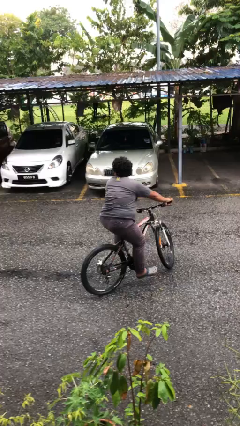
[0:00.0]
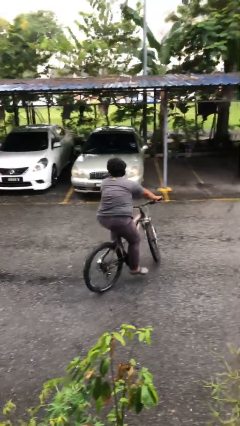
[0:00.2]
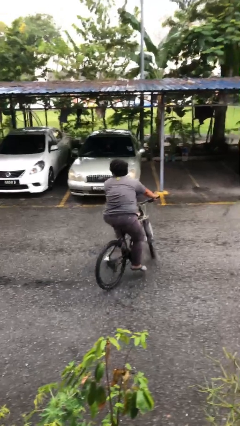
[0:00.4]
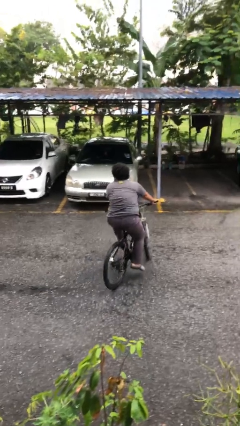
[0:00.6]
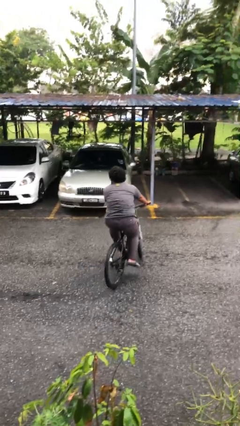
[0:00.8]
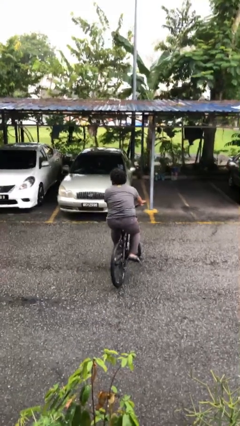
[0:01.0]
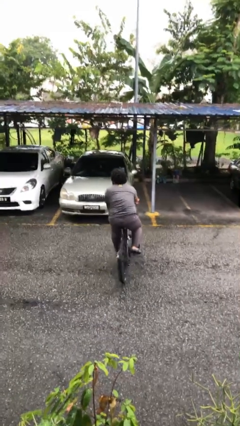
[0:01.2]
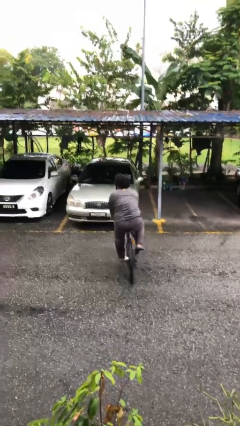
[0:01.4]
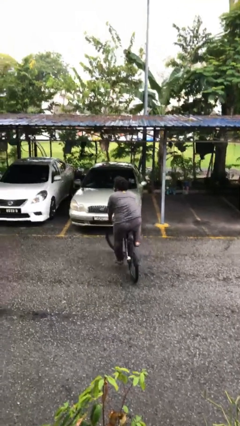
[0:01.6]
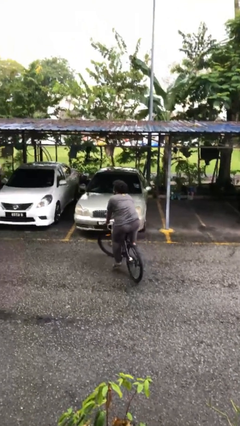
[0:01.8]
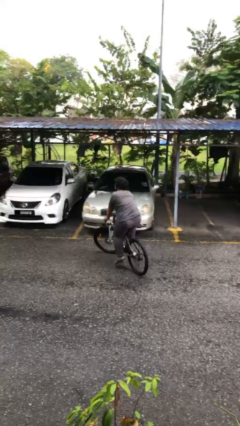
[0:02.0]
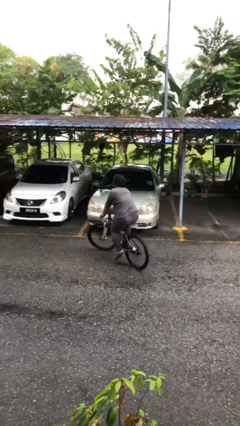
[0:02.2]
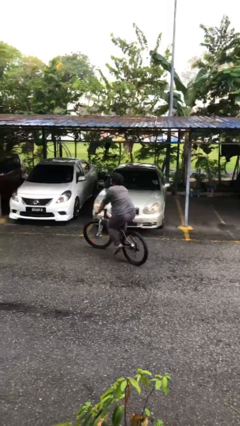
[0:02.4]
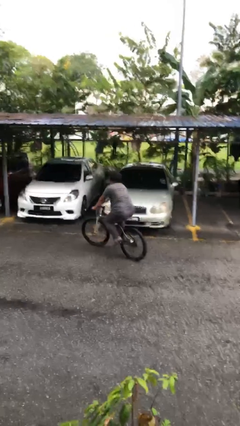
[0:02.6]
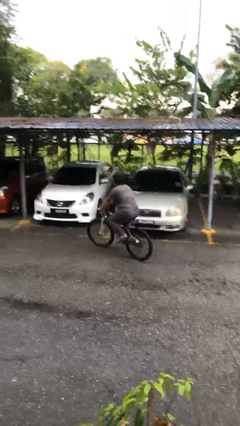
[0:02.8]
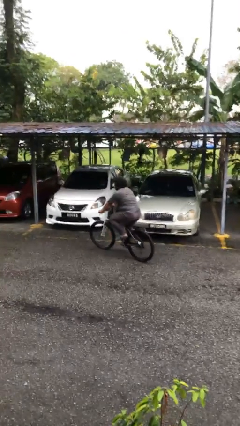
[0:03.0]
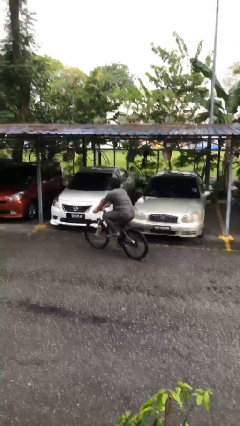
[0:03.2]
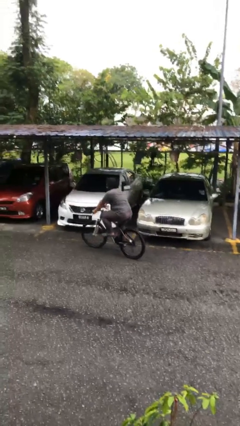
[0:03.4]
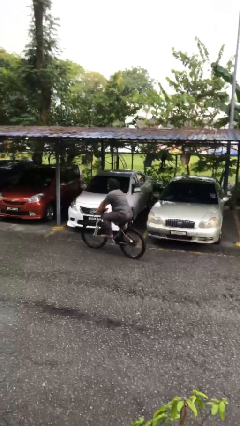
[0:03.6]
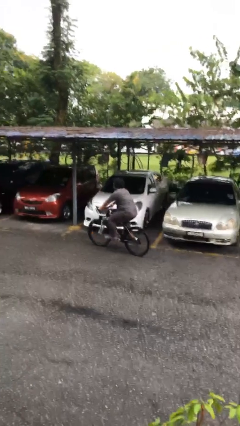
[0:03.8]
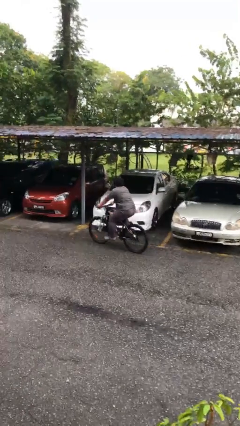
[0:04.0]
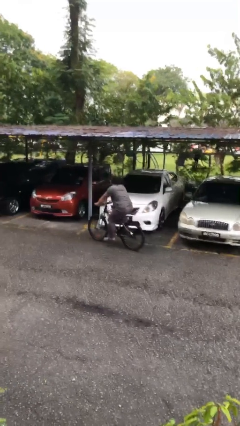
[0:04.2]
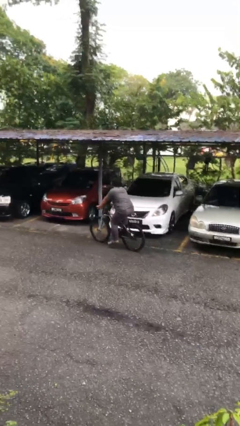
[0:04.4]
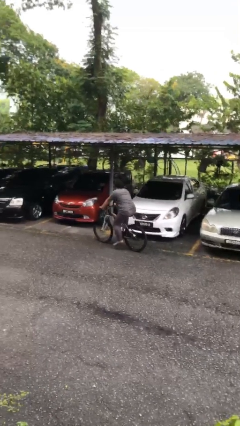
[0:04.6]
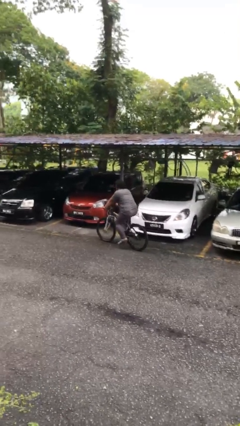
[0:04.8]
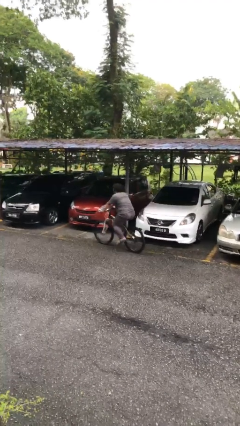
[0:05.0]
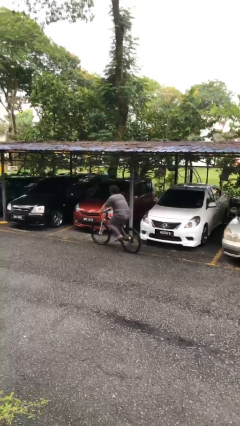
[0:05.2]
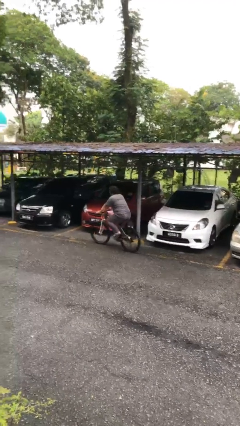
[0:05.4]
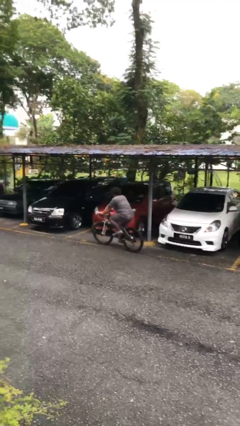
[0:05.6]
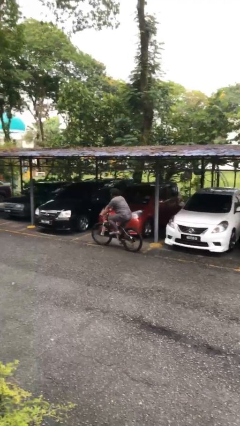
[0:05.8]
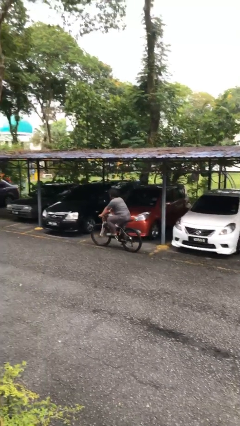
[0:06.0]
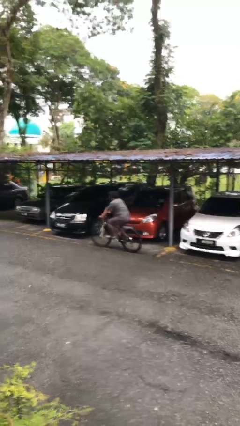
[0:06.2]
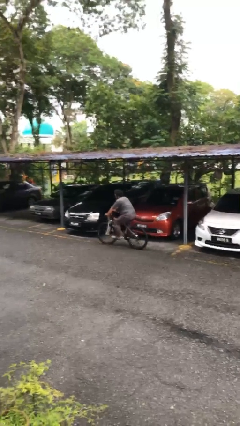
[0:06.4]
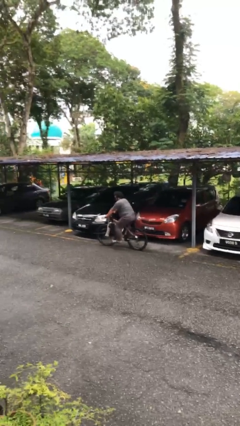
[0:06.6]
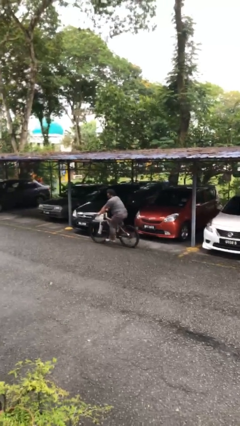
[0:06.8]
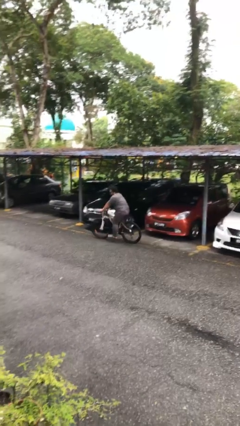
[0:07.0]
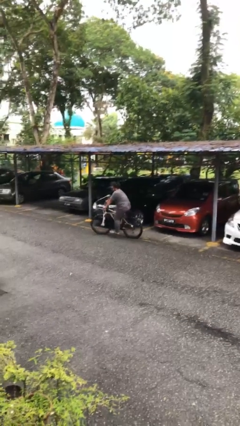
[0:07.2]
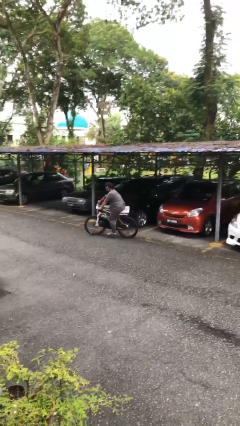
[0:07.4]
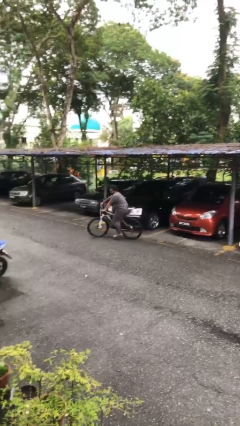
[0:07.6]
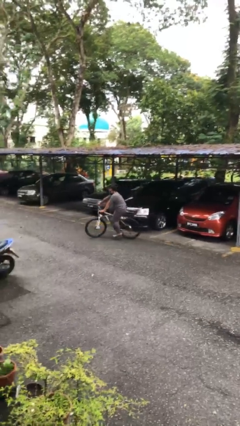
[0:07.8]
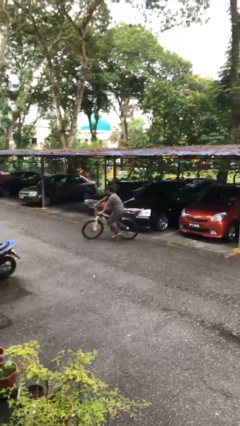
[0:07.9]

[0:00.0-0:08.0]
person rides bicycle

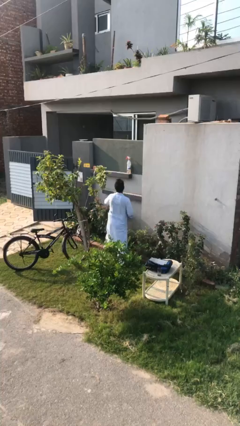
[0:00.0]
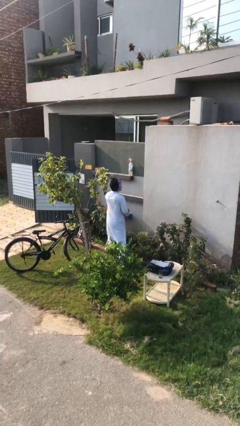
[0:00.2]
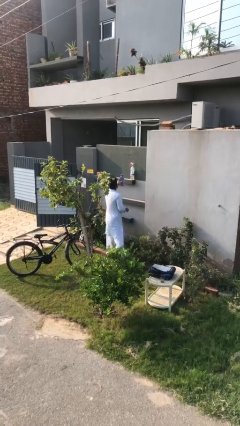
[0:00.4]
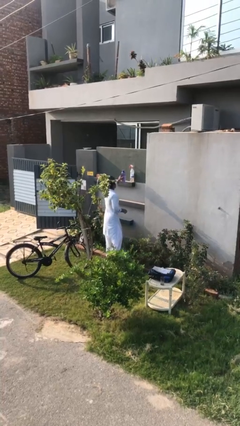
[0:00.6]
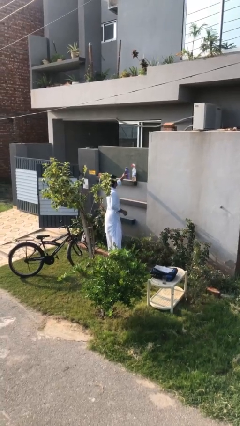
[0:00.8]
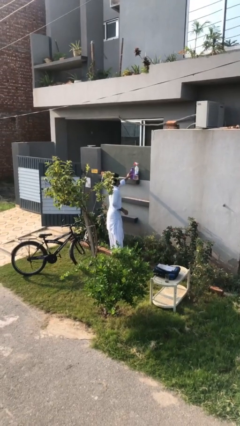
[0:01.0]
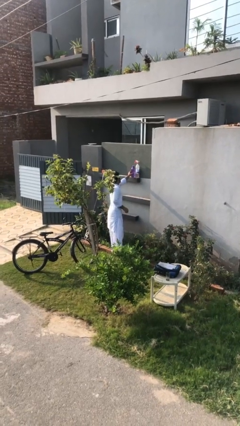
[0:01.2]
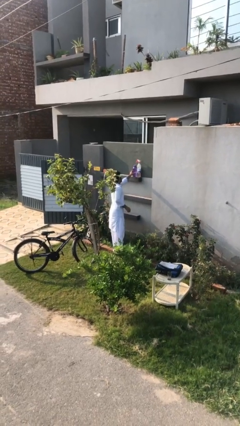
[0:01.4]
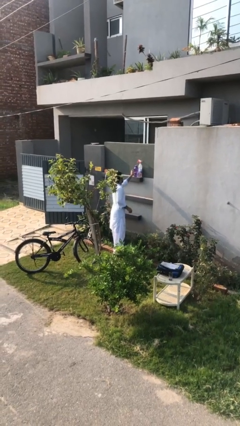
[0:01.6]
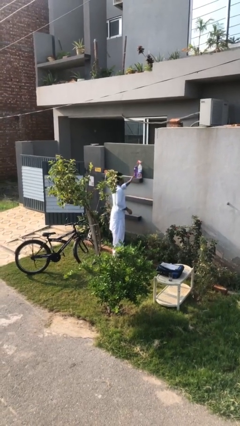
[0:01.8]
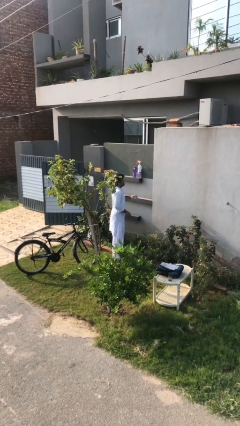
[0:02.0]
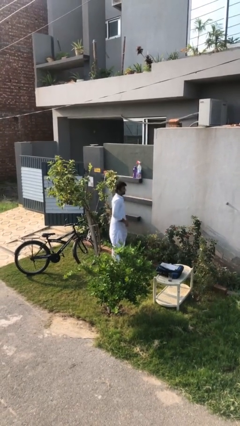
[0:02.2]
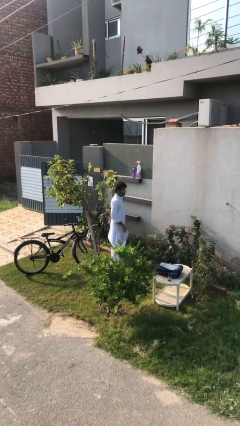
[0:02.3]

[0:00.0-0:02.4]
person puts down object on shelf

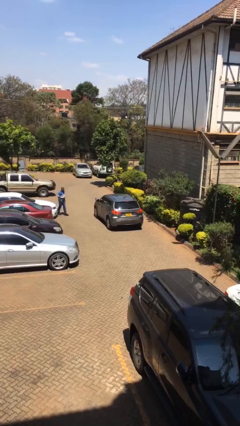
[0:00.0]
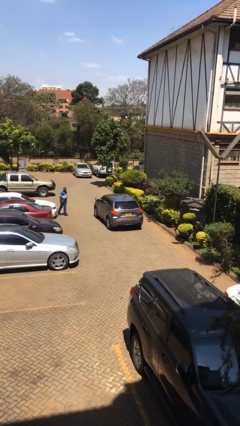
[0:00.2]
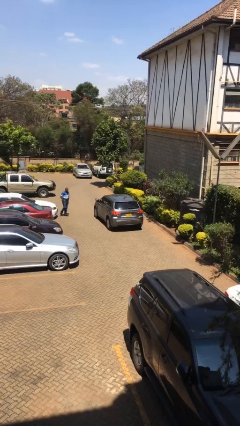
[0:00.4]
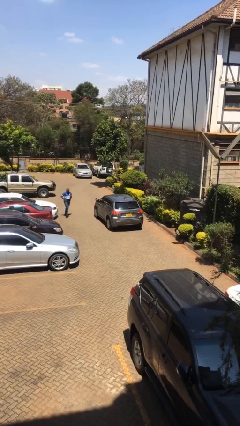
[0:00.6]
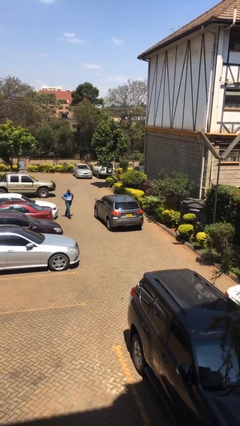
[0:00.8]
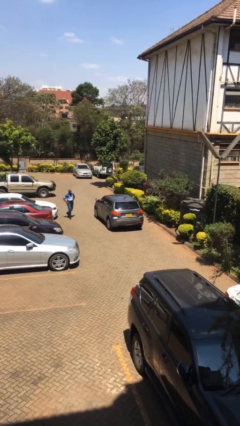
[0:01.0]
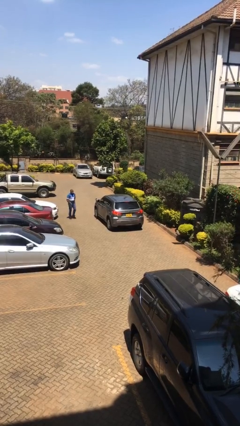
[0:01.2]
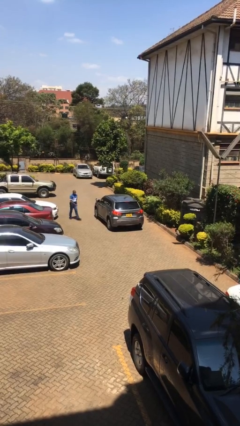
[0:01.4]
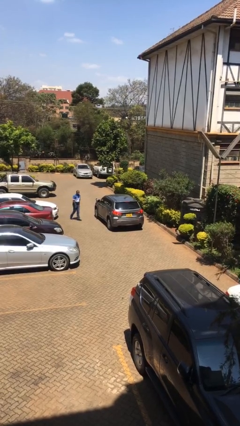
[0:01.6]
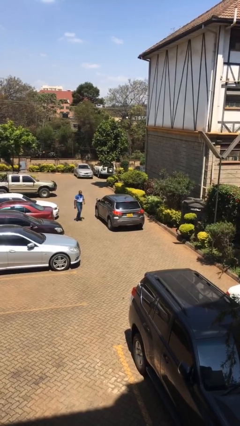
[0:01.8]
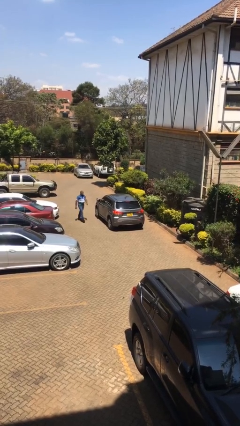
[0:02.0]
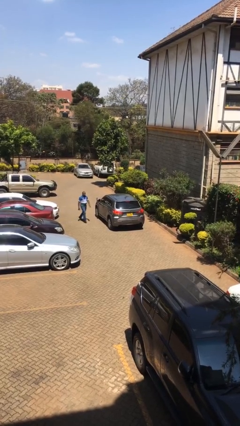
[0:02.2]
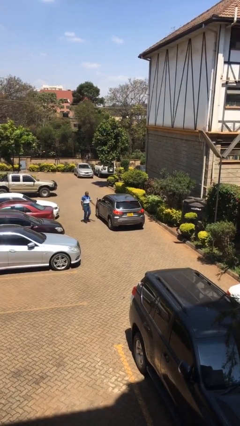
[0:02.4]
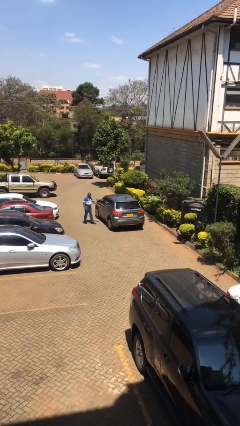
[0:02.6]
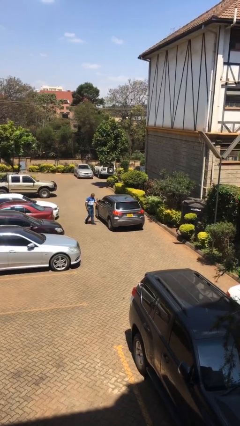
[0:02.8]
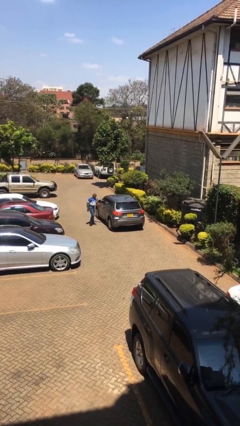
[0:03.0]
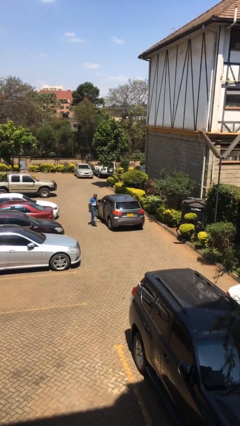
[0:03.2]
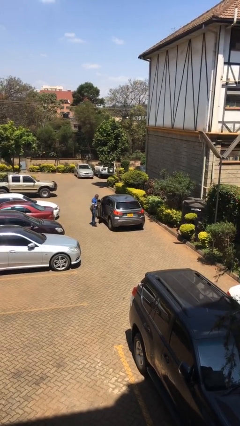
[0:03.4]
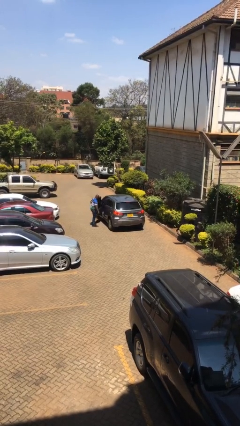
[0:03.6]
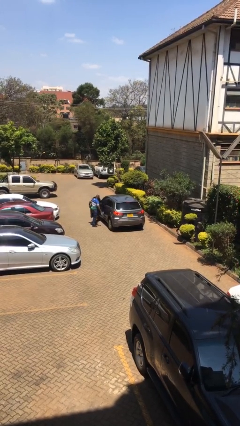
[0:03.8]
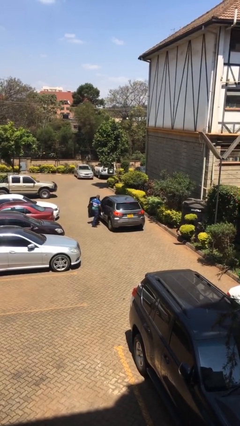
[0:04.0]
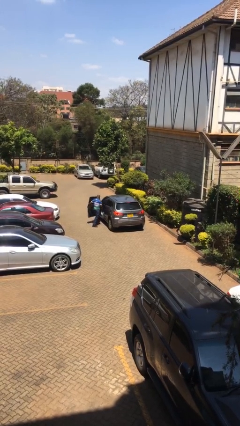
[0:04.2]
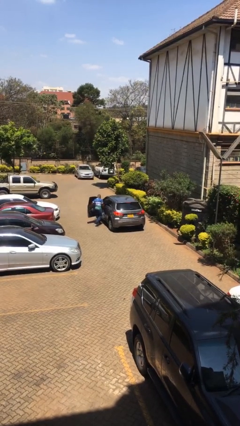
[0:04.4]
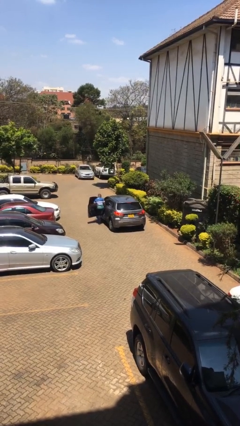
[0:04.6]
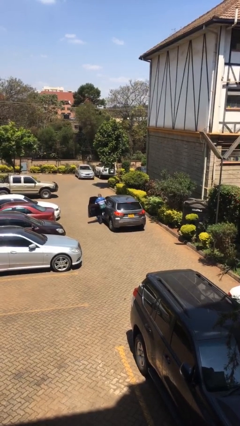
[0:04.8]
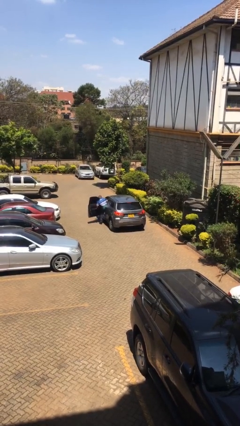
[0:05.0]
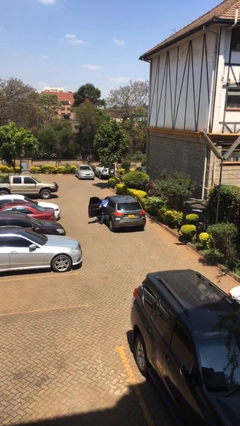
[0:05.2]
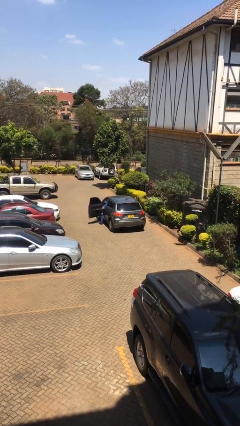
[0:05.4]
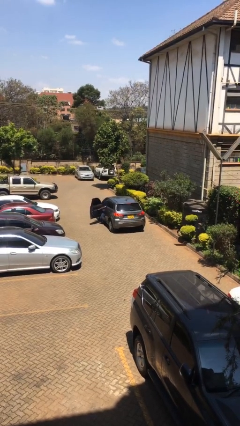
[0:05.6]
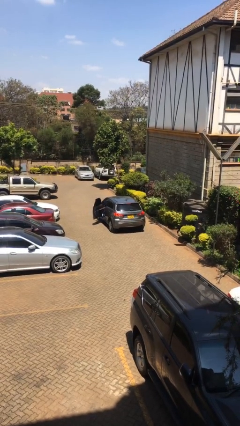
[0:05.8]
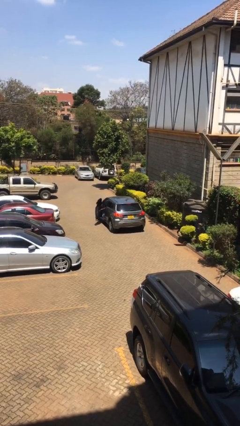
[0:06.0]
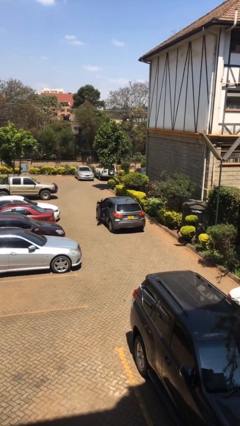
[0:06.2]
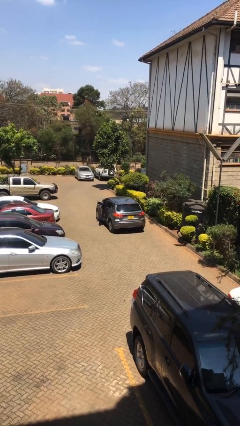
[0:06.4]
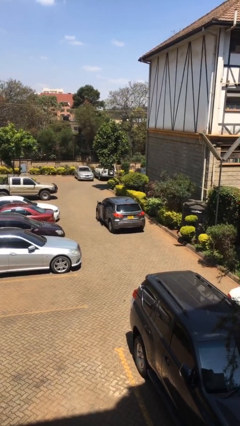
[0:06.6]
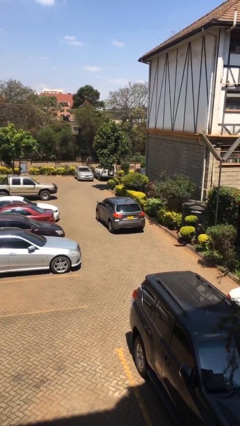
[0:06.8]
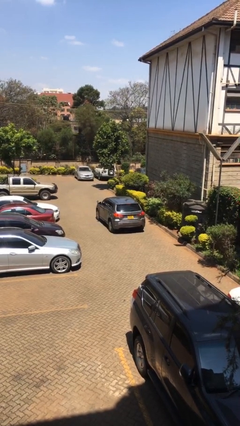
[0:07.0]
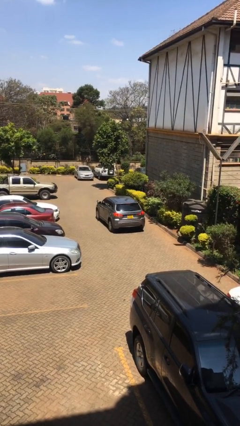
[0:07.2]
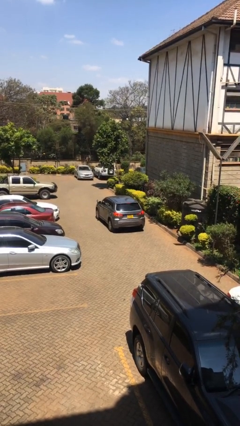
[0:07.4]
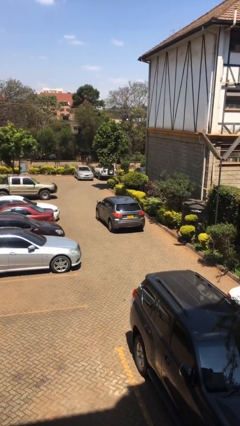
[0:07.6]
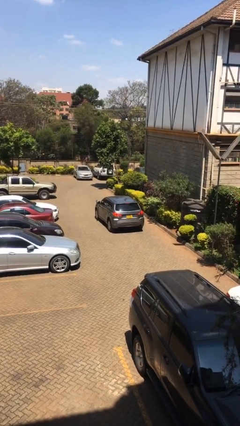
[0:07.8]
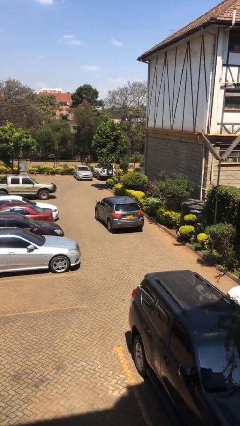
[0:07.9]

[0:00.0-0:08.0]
car picks up person
